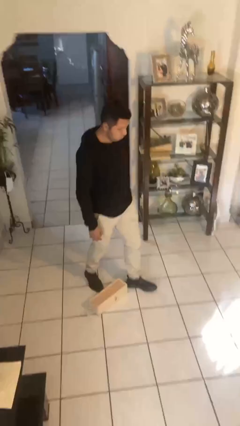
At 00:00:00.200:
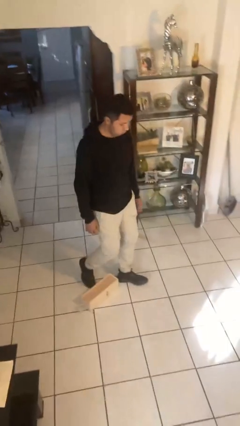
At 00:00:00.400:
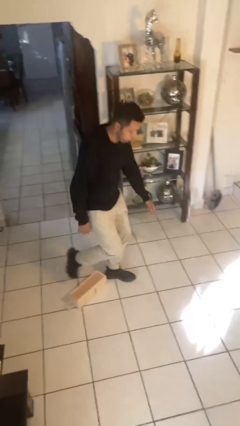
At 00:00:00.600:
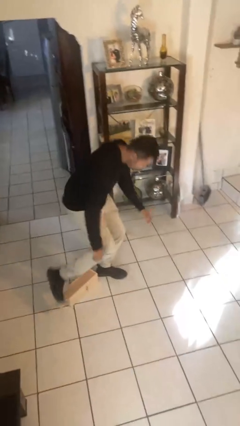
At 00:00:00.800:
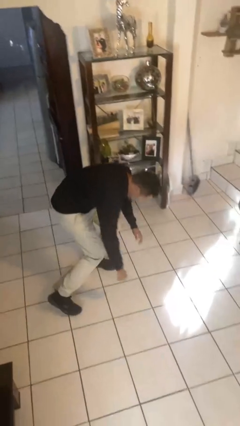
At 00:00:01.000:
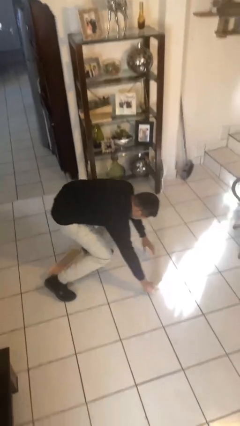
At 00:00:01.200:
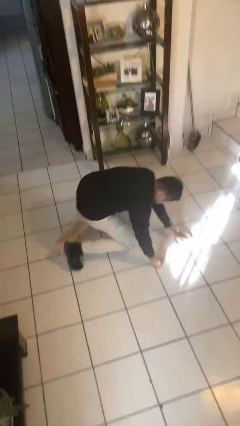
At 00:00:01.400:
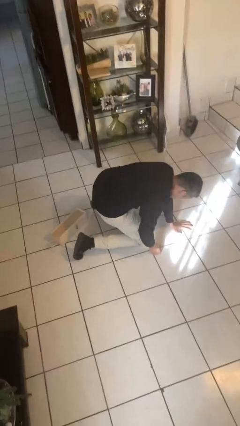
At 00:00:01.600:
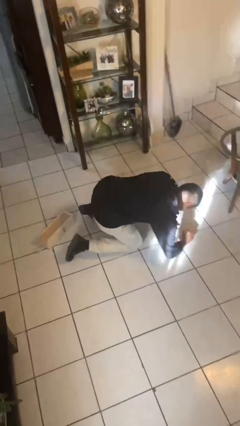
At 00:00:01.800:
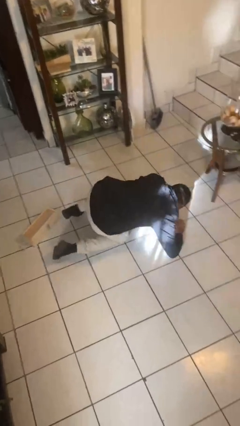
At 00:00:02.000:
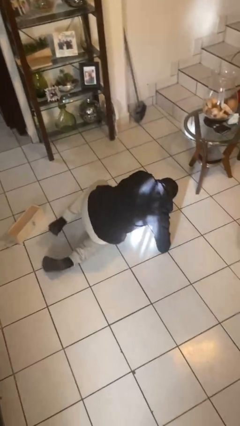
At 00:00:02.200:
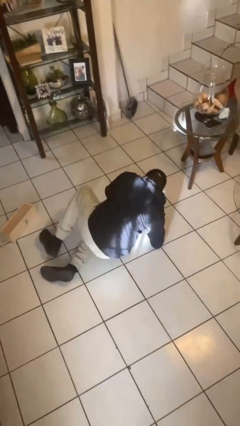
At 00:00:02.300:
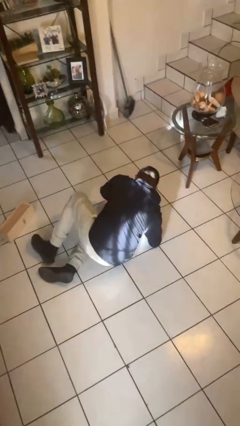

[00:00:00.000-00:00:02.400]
person lies down on floor

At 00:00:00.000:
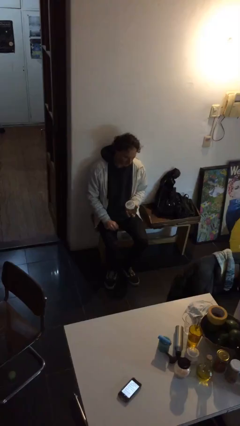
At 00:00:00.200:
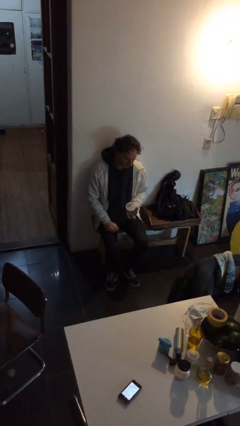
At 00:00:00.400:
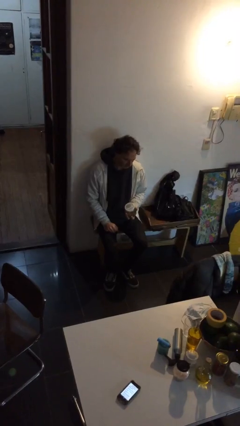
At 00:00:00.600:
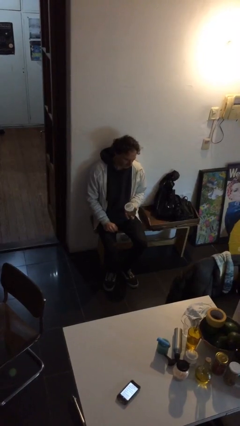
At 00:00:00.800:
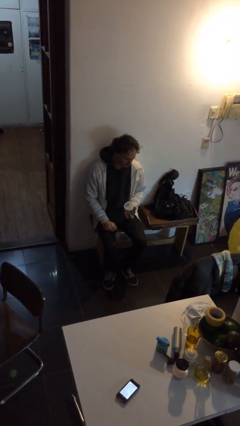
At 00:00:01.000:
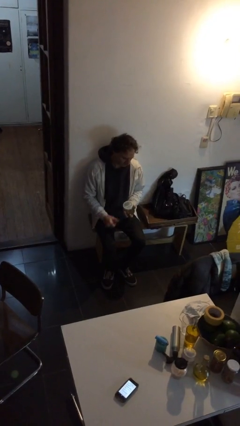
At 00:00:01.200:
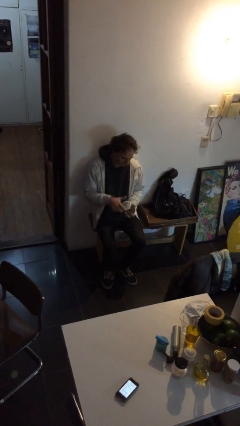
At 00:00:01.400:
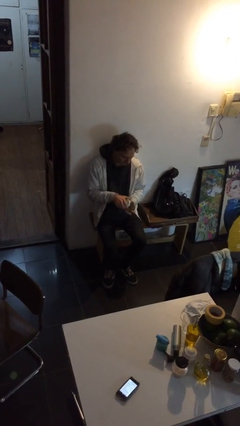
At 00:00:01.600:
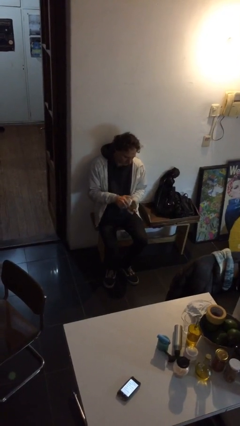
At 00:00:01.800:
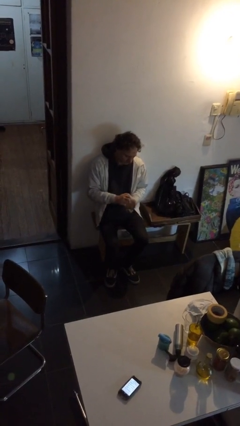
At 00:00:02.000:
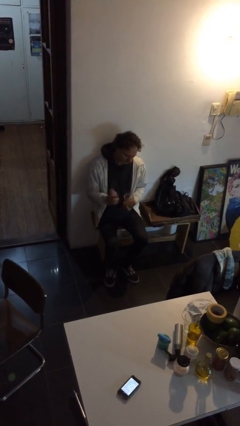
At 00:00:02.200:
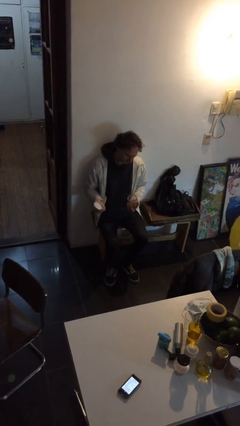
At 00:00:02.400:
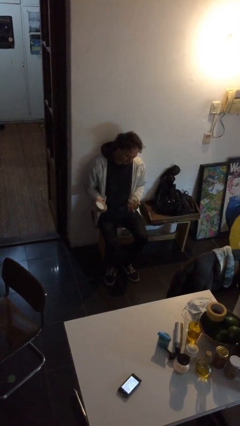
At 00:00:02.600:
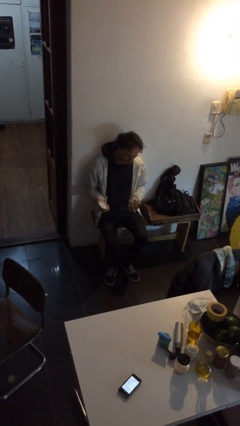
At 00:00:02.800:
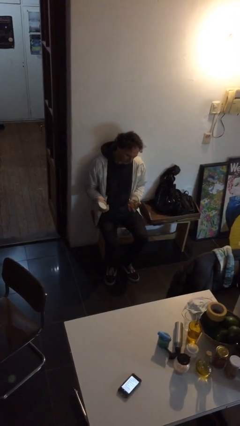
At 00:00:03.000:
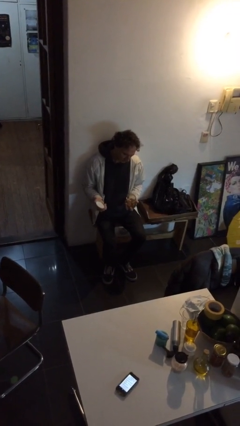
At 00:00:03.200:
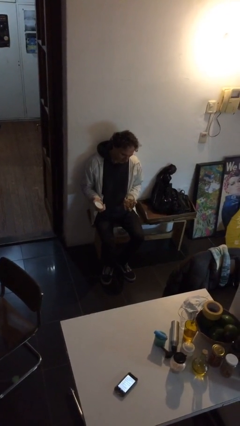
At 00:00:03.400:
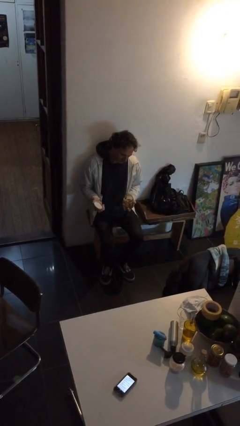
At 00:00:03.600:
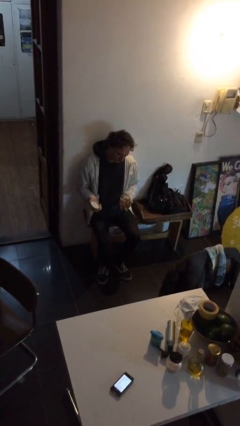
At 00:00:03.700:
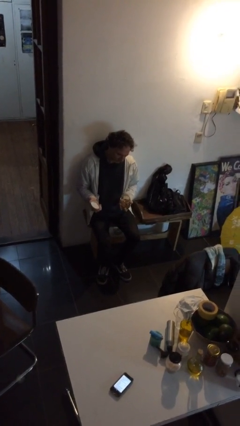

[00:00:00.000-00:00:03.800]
person opens jar

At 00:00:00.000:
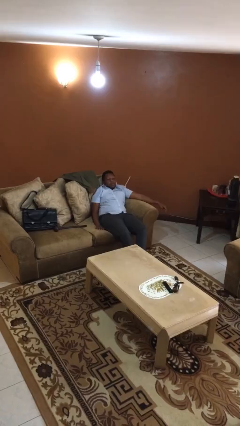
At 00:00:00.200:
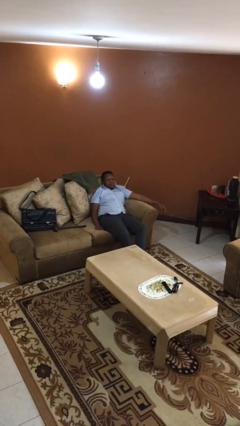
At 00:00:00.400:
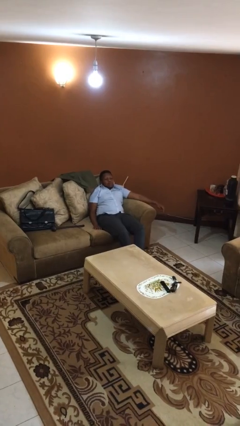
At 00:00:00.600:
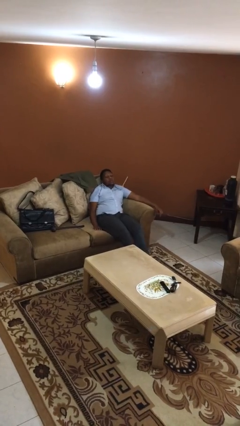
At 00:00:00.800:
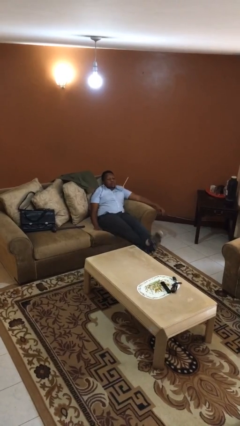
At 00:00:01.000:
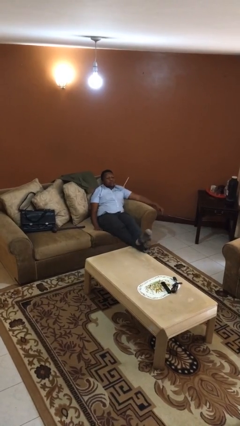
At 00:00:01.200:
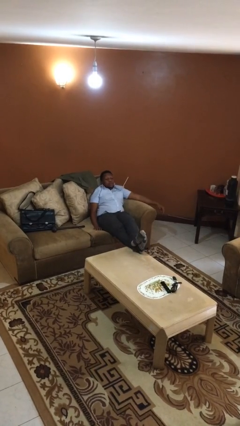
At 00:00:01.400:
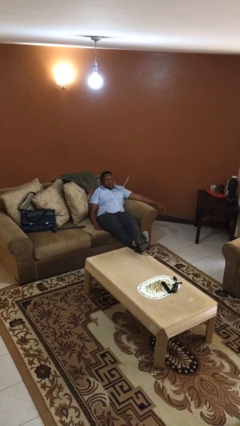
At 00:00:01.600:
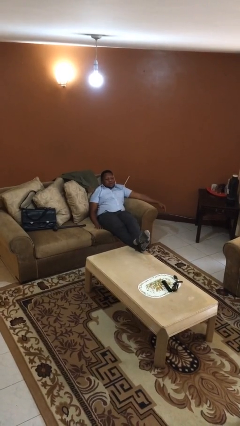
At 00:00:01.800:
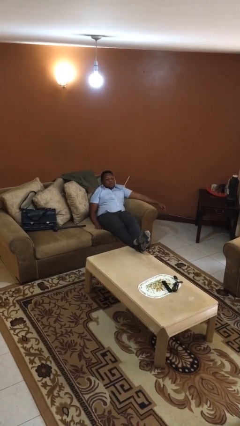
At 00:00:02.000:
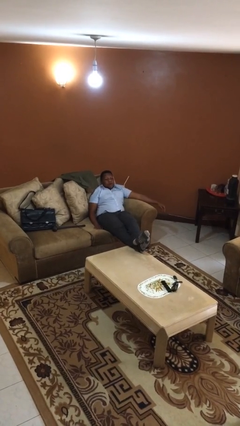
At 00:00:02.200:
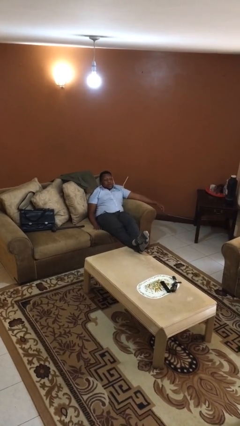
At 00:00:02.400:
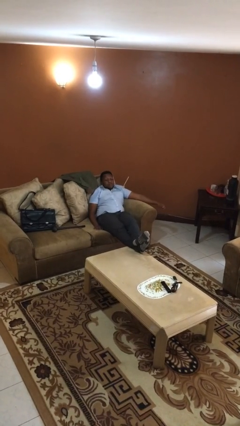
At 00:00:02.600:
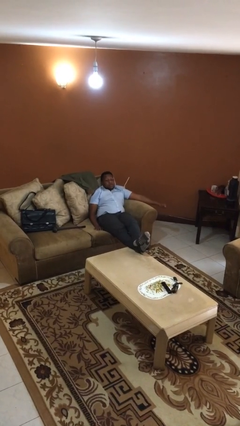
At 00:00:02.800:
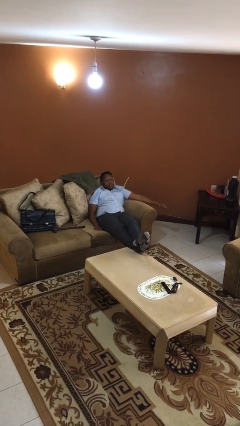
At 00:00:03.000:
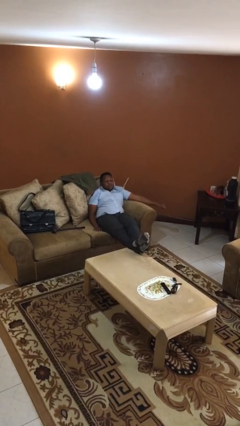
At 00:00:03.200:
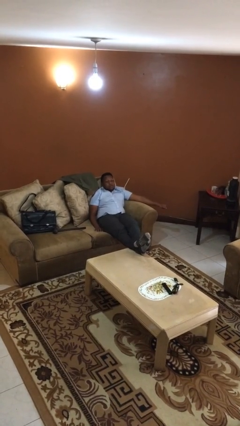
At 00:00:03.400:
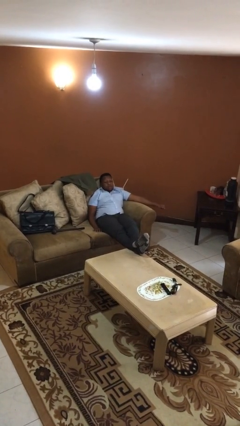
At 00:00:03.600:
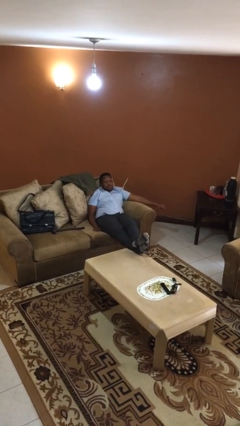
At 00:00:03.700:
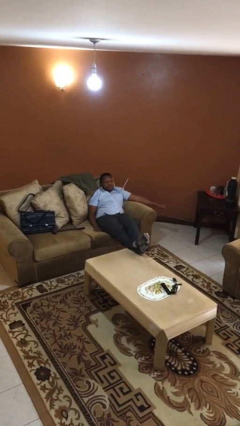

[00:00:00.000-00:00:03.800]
person puts feet up

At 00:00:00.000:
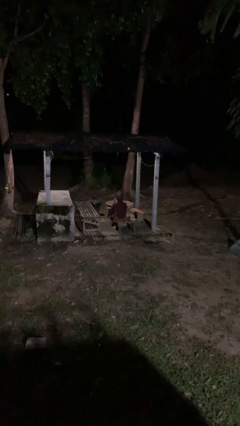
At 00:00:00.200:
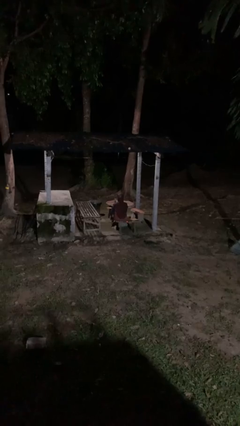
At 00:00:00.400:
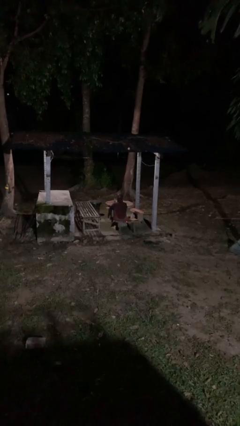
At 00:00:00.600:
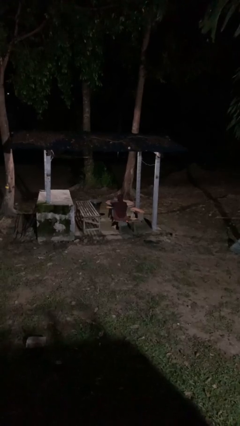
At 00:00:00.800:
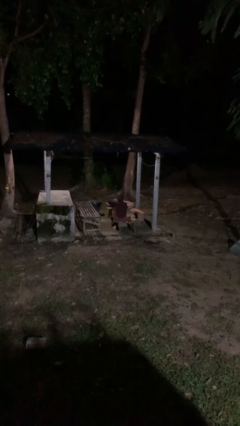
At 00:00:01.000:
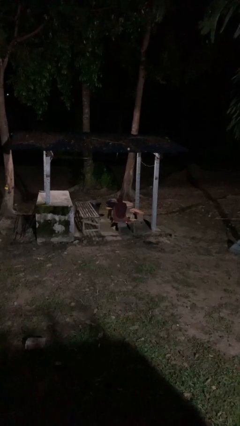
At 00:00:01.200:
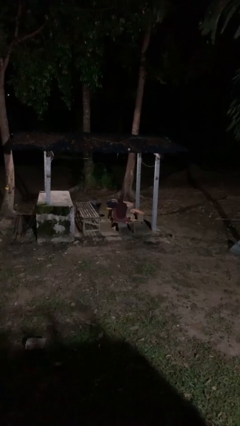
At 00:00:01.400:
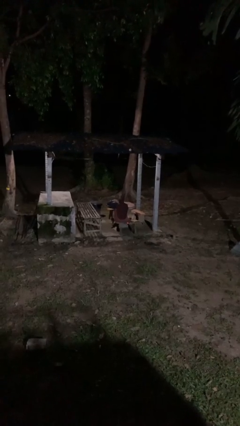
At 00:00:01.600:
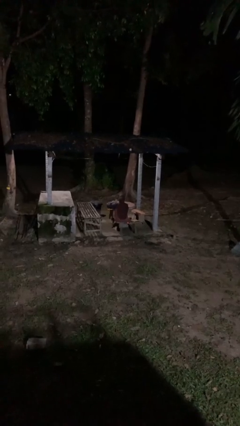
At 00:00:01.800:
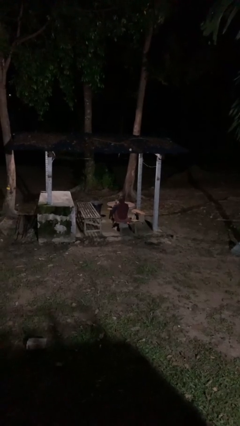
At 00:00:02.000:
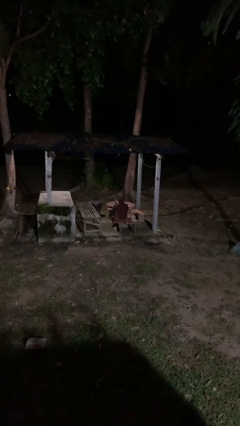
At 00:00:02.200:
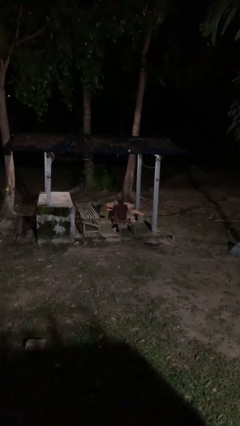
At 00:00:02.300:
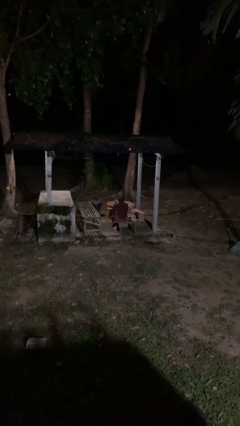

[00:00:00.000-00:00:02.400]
person gestures cut

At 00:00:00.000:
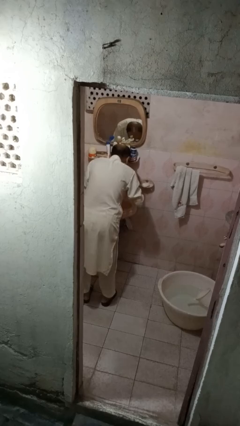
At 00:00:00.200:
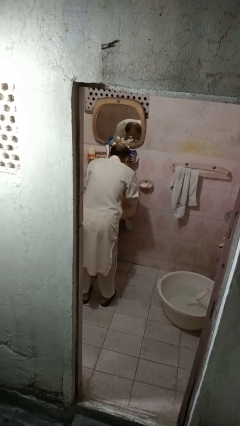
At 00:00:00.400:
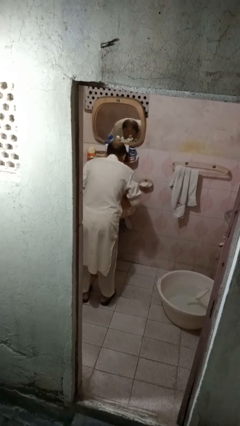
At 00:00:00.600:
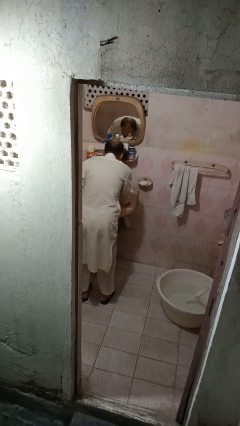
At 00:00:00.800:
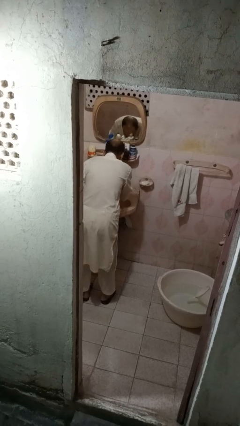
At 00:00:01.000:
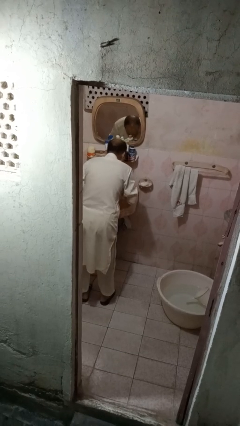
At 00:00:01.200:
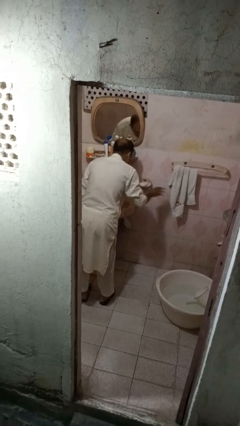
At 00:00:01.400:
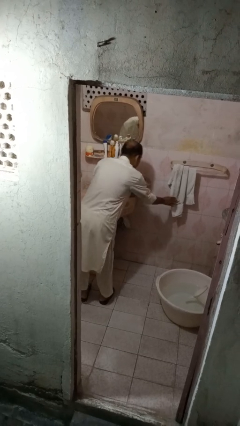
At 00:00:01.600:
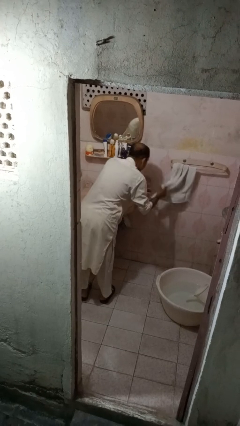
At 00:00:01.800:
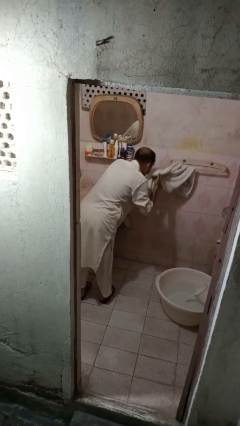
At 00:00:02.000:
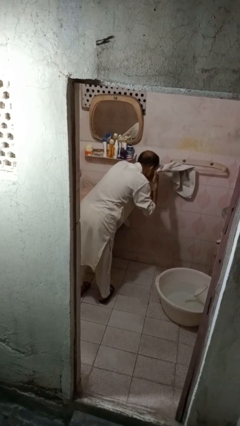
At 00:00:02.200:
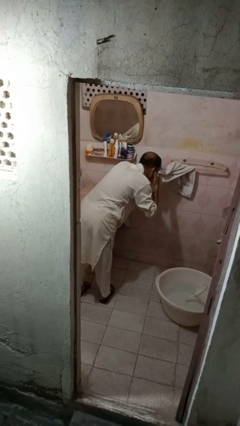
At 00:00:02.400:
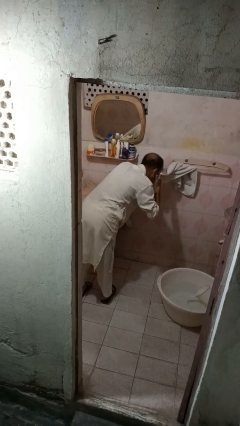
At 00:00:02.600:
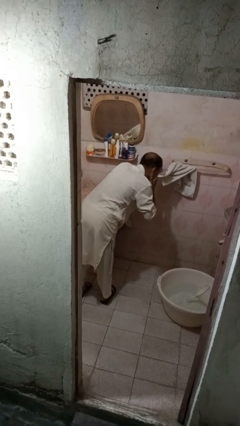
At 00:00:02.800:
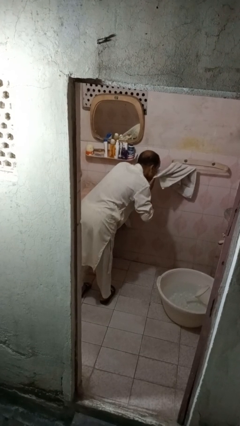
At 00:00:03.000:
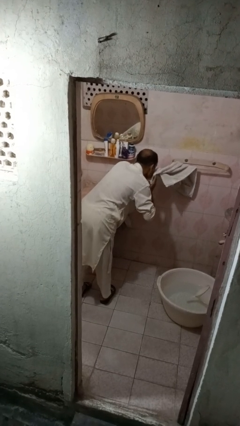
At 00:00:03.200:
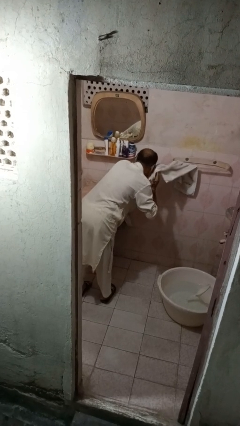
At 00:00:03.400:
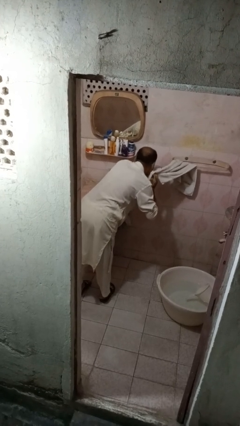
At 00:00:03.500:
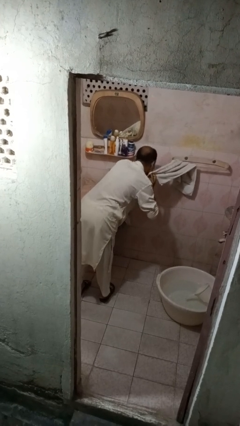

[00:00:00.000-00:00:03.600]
person dries face with towel

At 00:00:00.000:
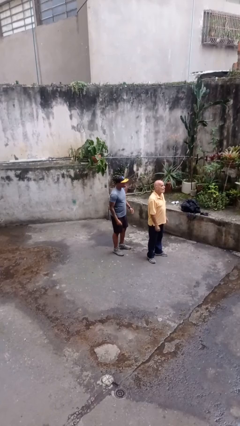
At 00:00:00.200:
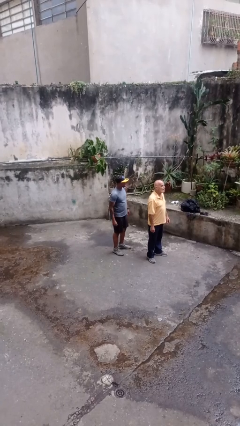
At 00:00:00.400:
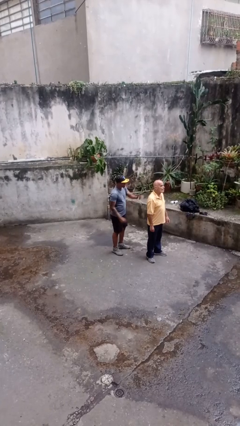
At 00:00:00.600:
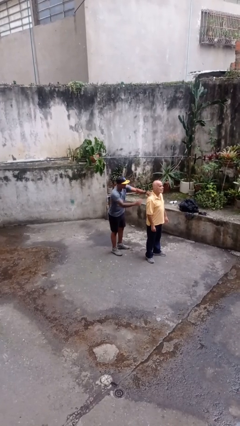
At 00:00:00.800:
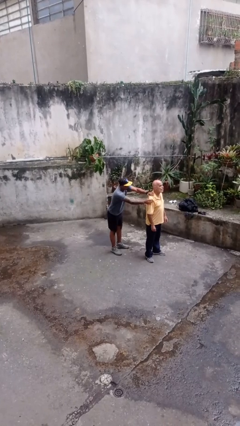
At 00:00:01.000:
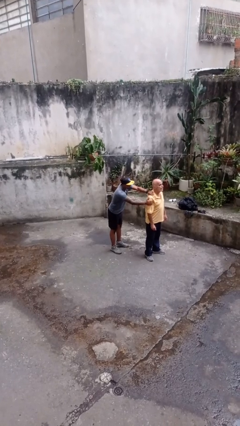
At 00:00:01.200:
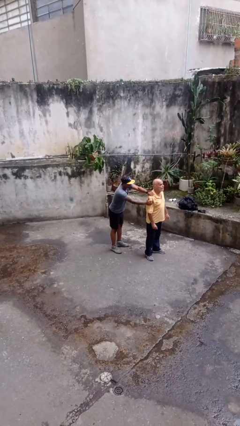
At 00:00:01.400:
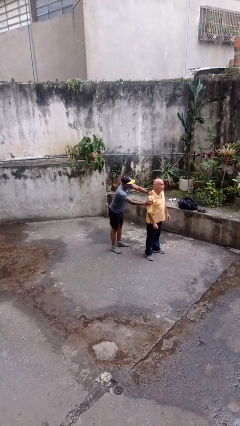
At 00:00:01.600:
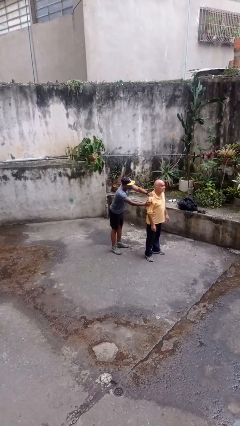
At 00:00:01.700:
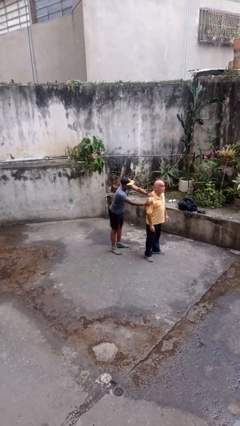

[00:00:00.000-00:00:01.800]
person grabs person by shoulder
